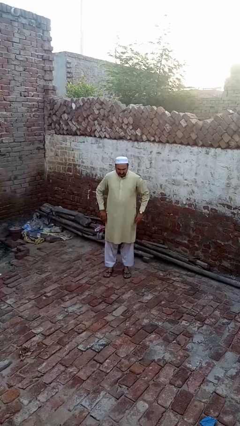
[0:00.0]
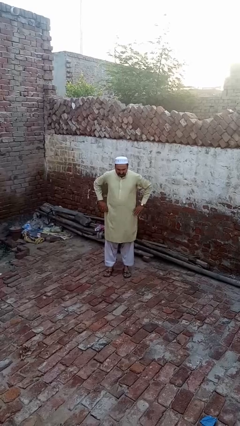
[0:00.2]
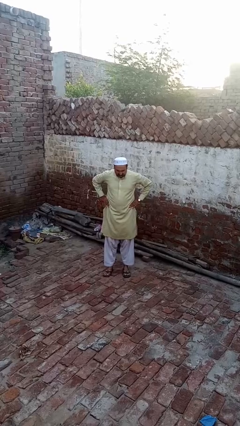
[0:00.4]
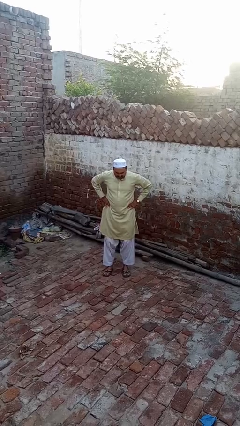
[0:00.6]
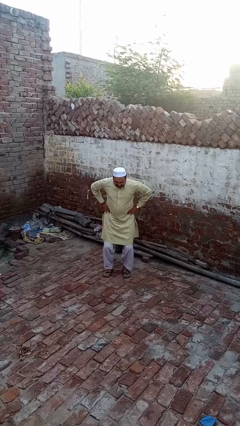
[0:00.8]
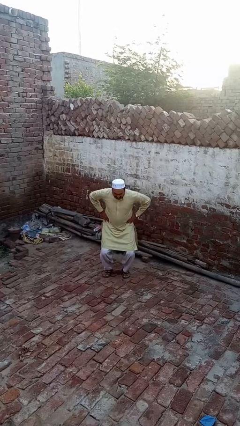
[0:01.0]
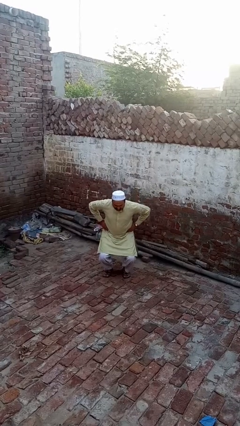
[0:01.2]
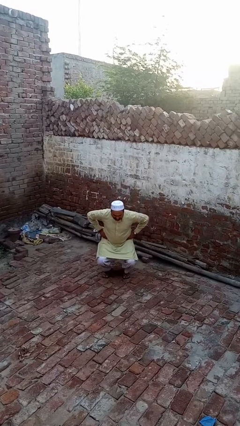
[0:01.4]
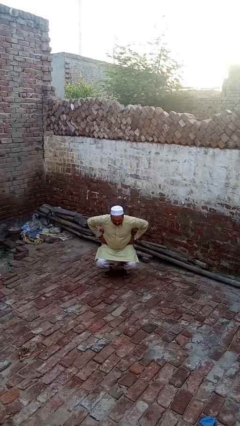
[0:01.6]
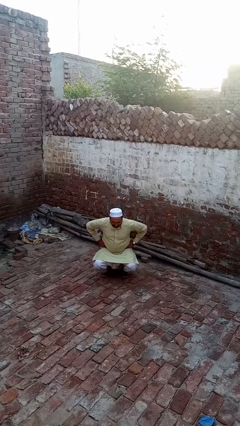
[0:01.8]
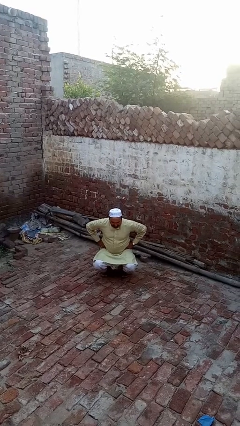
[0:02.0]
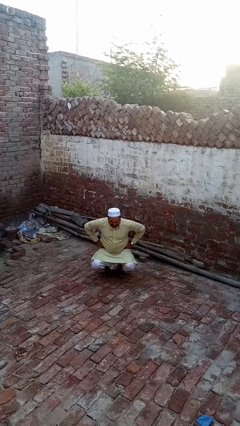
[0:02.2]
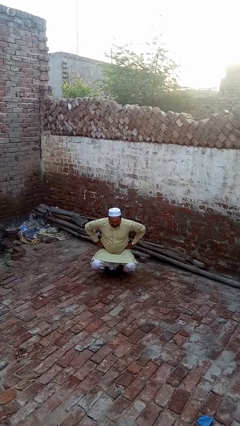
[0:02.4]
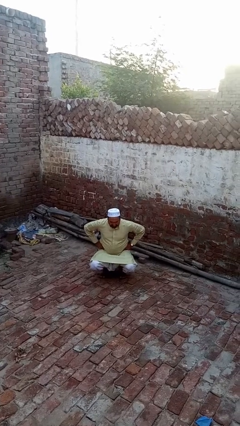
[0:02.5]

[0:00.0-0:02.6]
person squats

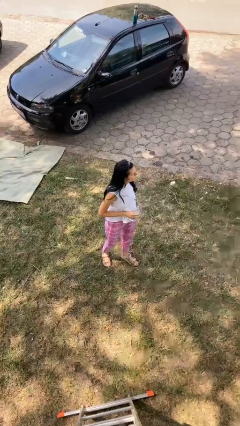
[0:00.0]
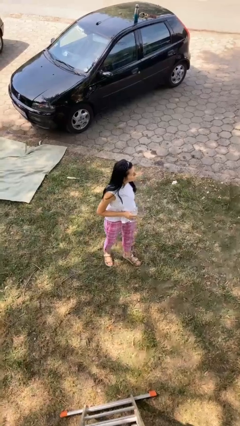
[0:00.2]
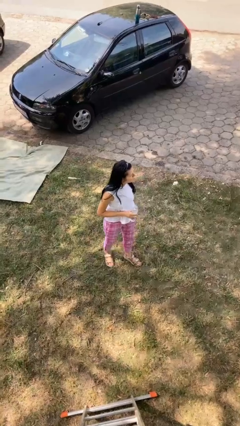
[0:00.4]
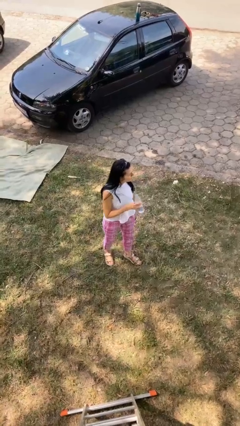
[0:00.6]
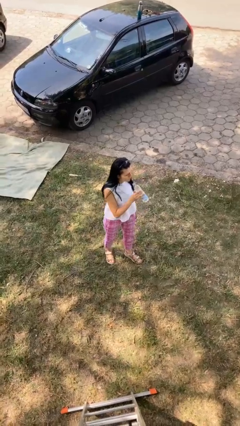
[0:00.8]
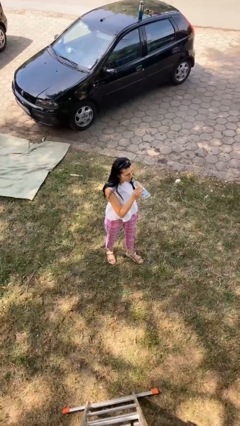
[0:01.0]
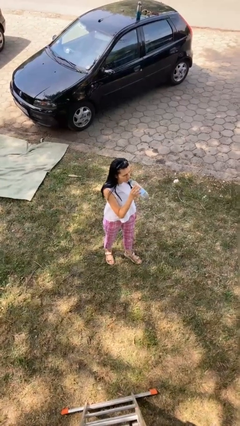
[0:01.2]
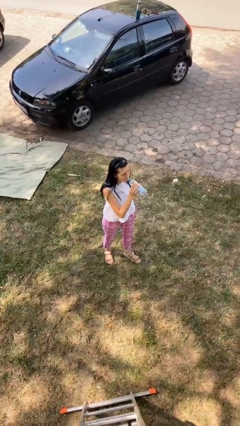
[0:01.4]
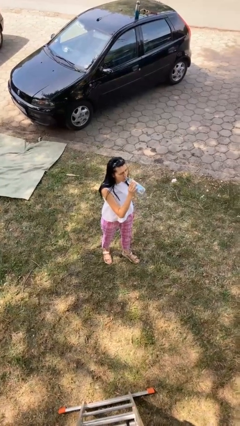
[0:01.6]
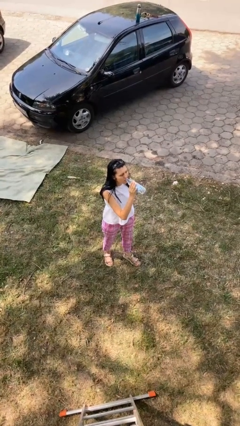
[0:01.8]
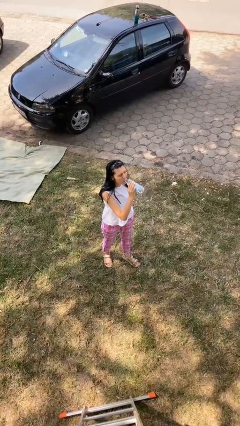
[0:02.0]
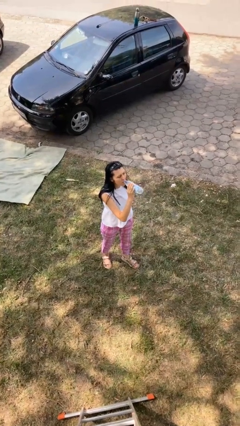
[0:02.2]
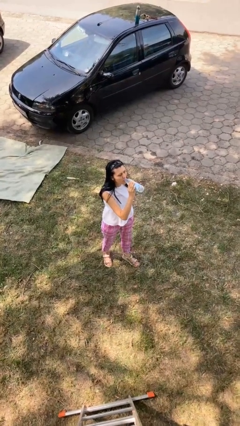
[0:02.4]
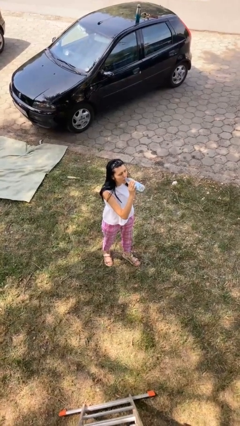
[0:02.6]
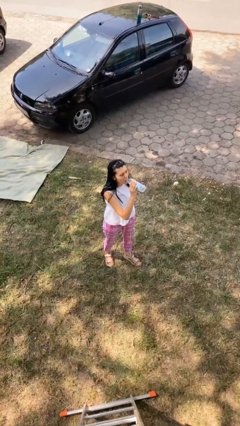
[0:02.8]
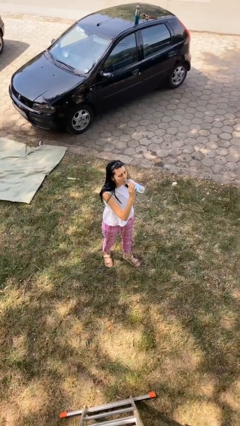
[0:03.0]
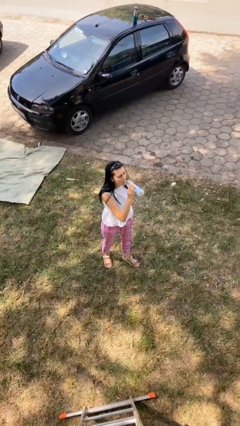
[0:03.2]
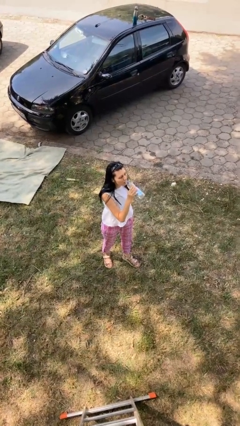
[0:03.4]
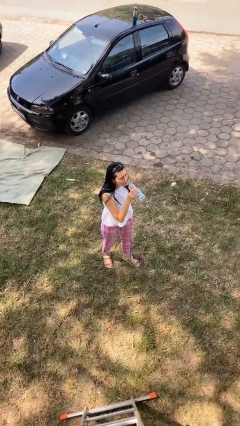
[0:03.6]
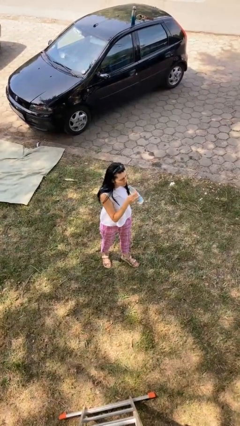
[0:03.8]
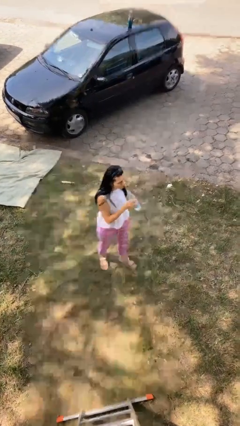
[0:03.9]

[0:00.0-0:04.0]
person drinks from bottle

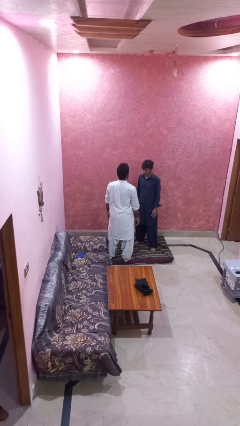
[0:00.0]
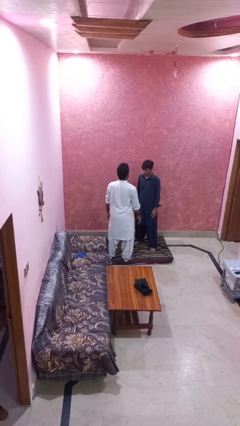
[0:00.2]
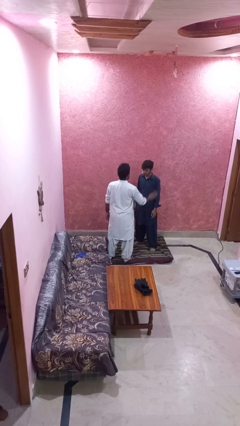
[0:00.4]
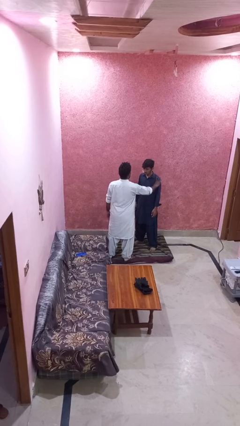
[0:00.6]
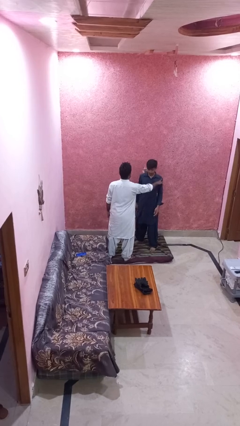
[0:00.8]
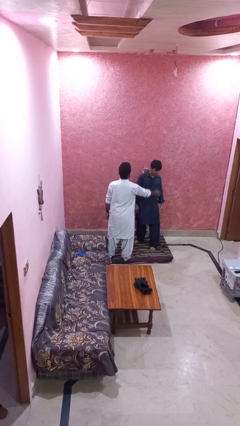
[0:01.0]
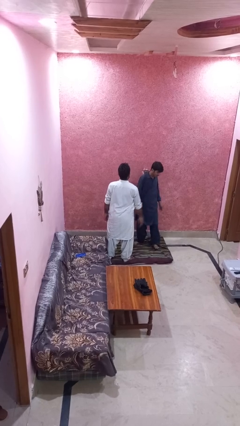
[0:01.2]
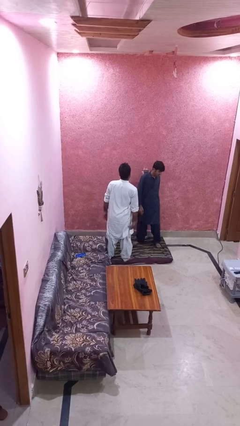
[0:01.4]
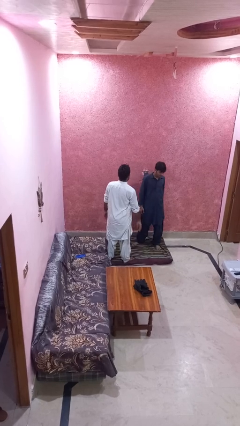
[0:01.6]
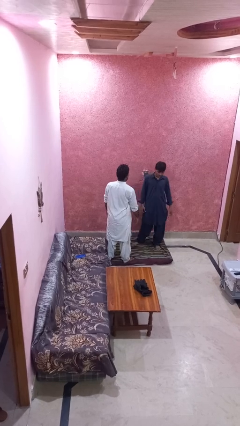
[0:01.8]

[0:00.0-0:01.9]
person shoves person

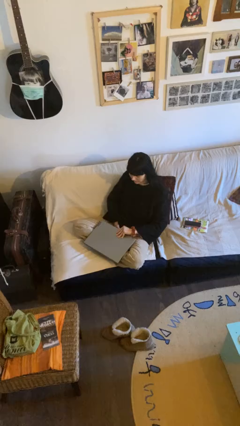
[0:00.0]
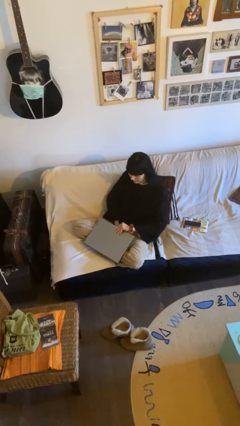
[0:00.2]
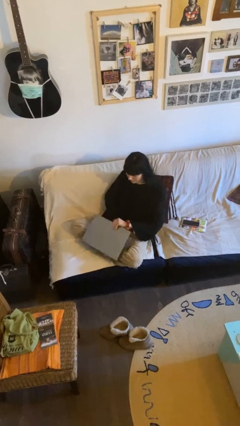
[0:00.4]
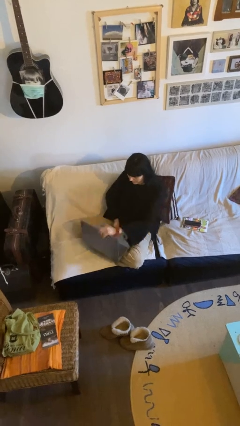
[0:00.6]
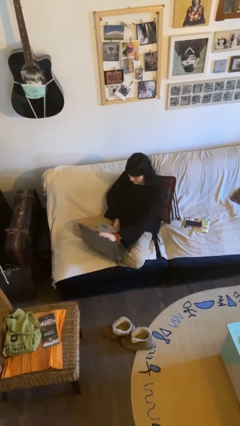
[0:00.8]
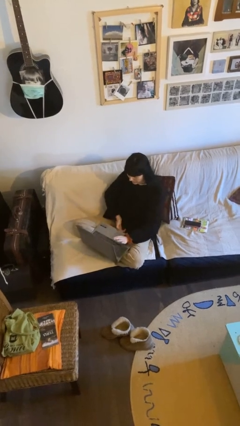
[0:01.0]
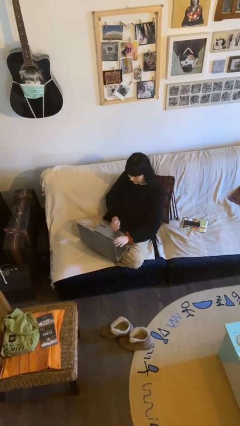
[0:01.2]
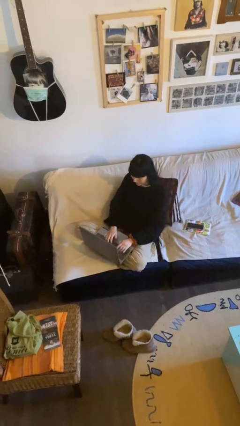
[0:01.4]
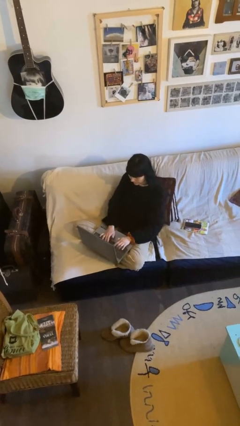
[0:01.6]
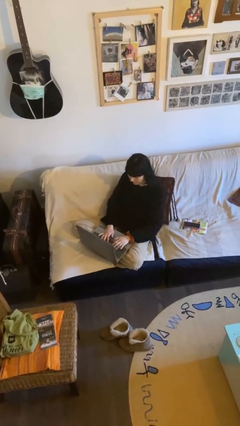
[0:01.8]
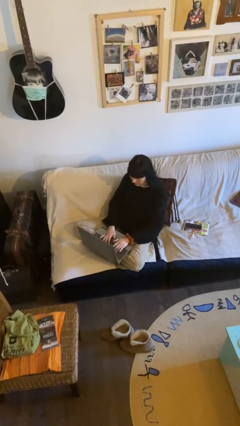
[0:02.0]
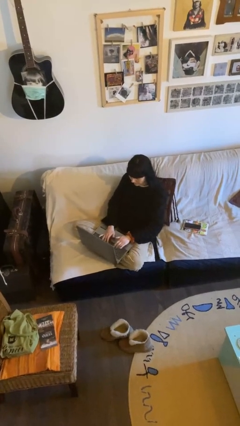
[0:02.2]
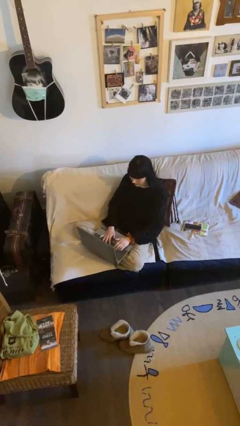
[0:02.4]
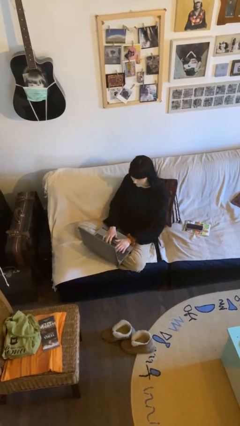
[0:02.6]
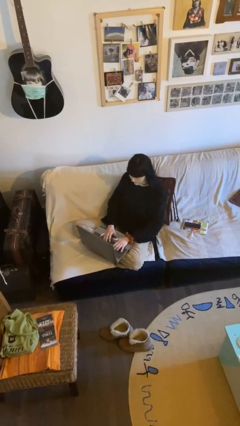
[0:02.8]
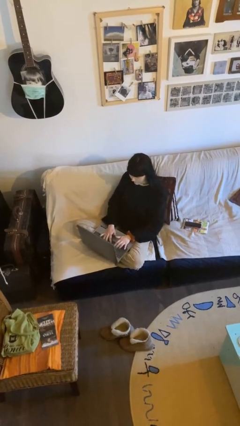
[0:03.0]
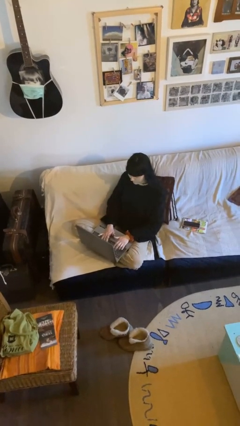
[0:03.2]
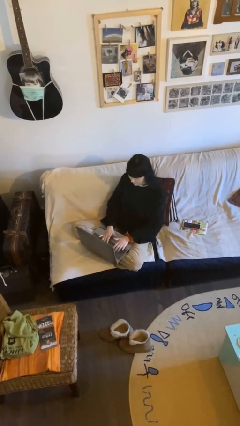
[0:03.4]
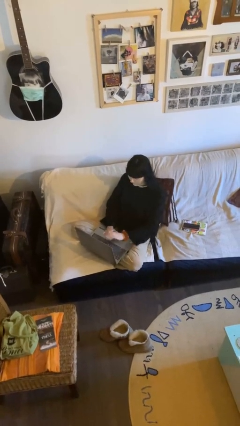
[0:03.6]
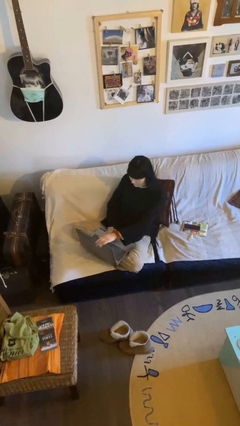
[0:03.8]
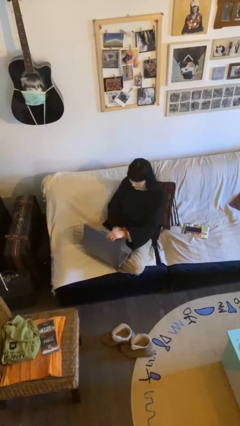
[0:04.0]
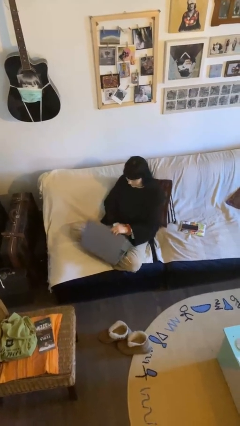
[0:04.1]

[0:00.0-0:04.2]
person interacts with laptop

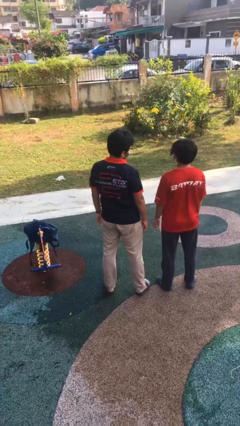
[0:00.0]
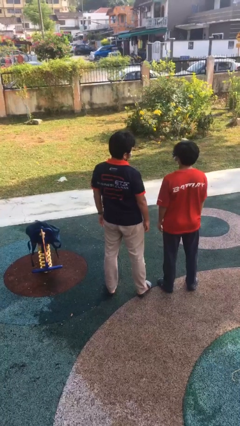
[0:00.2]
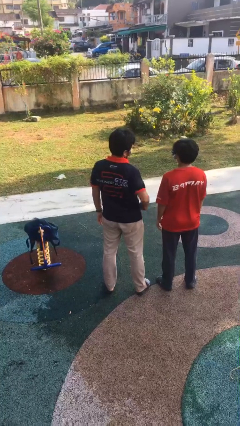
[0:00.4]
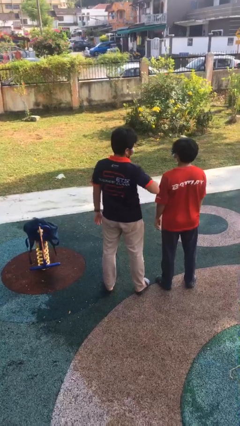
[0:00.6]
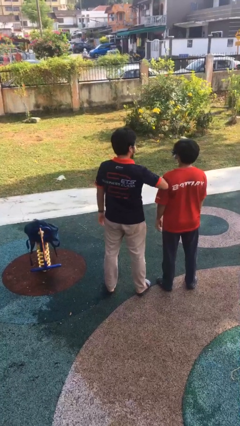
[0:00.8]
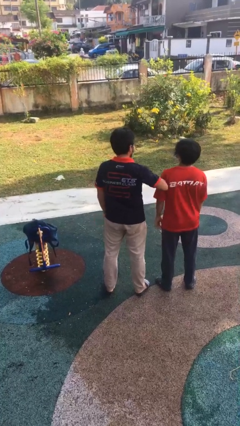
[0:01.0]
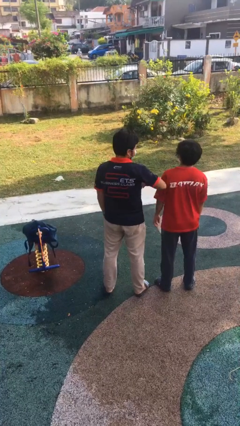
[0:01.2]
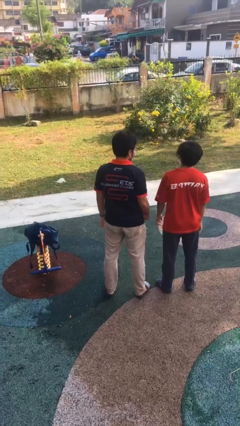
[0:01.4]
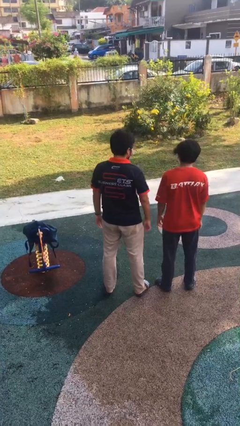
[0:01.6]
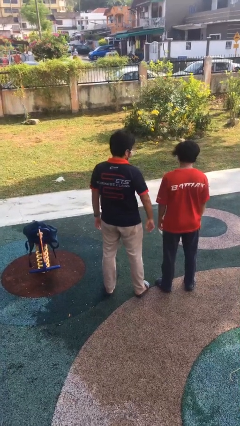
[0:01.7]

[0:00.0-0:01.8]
person nudges person with elbow

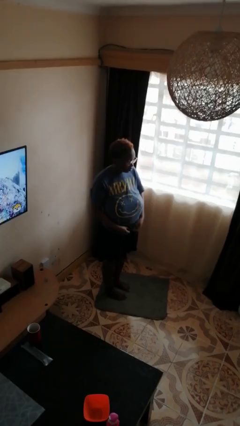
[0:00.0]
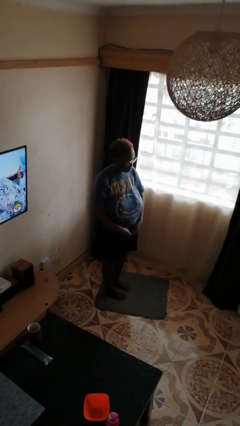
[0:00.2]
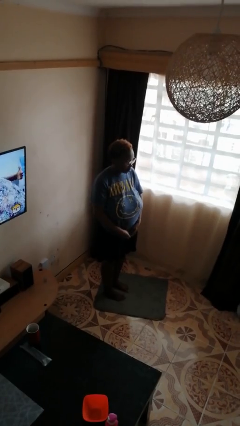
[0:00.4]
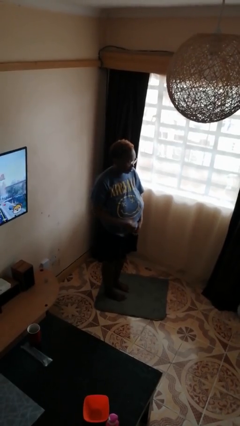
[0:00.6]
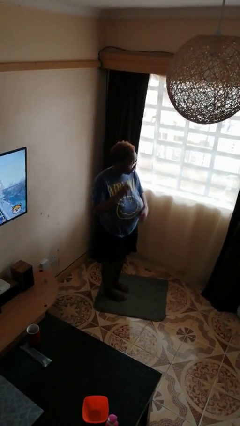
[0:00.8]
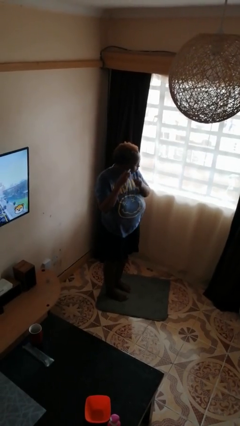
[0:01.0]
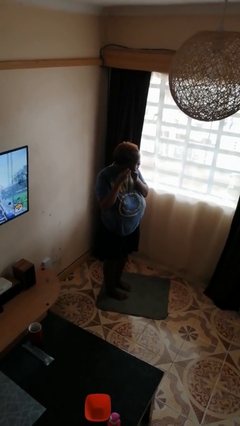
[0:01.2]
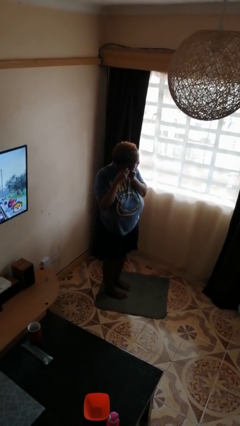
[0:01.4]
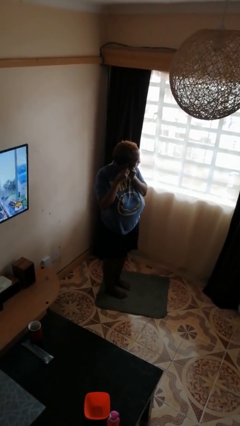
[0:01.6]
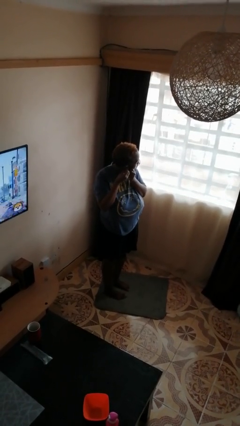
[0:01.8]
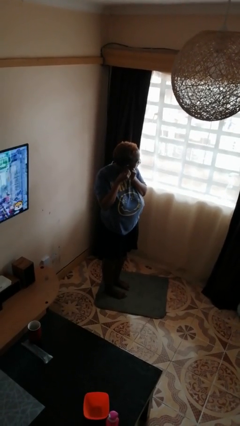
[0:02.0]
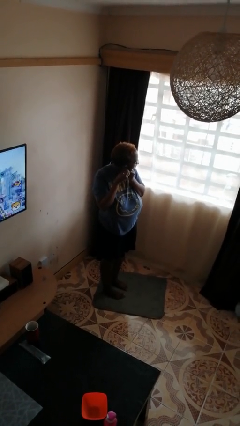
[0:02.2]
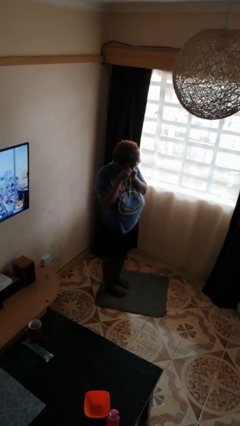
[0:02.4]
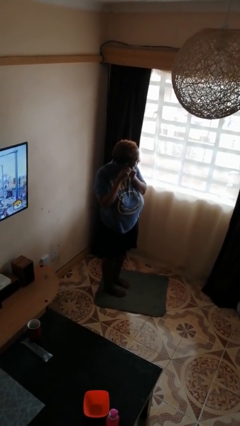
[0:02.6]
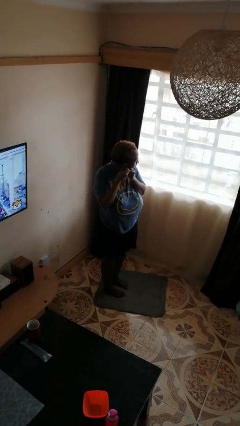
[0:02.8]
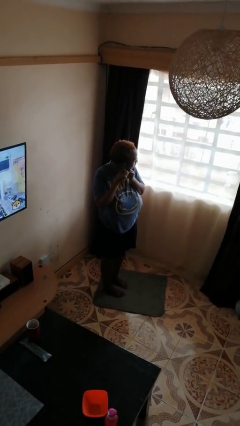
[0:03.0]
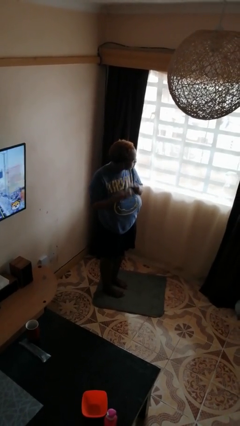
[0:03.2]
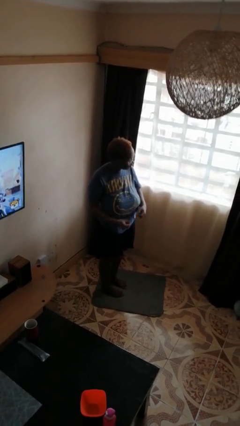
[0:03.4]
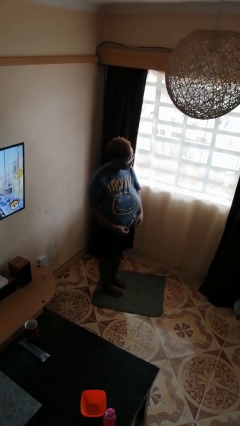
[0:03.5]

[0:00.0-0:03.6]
person takes off earrings
